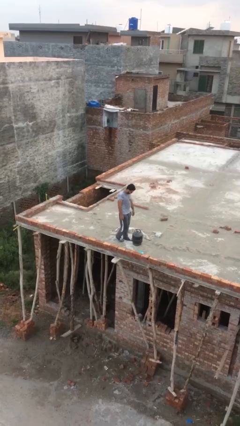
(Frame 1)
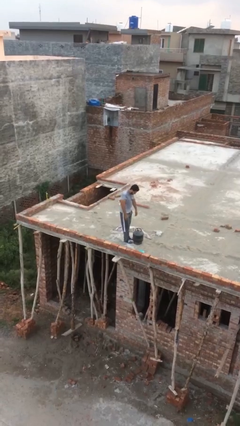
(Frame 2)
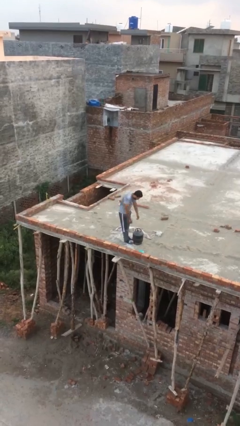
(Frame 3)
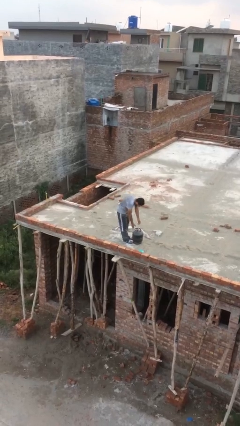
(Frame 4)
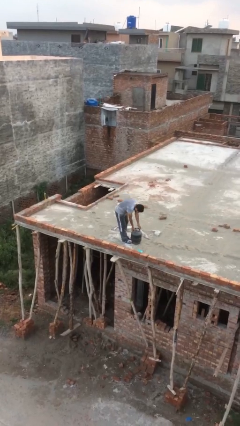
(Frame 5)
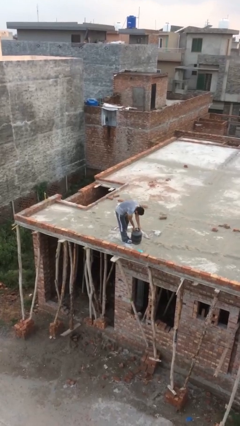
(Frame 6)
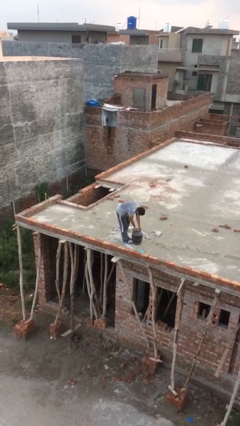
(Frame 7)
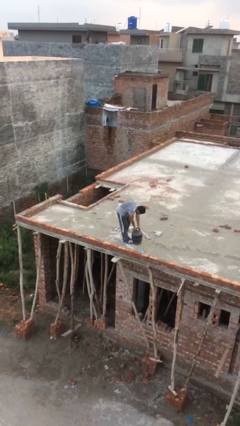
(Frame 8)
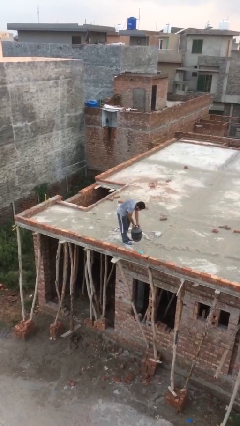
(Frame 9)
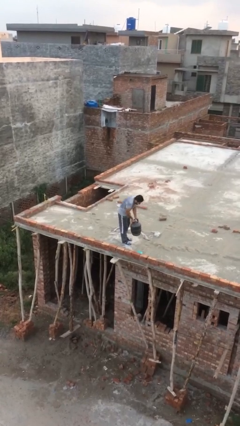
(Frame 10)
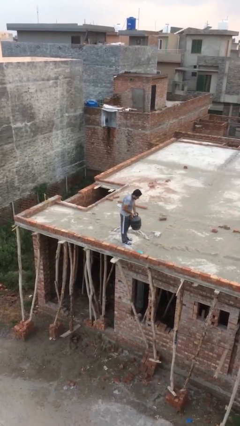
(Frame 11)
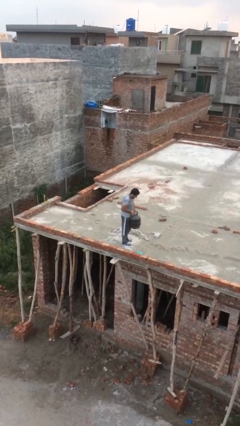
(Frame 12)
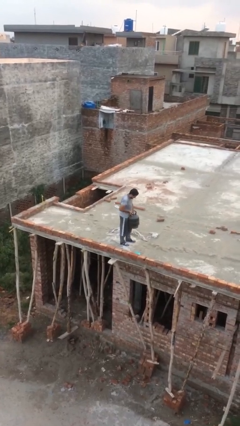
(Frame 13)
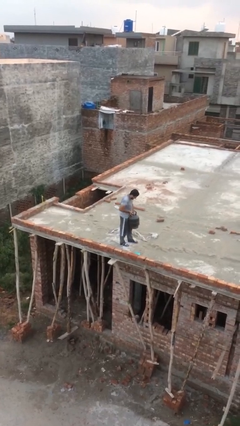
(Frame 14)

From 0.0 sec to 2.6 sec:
person picks up object from floor

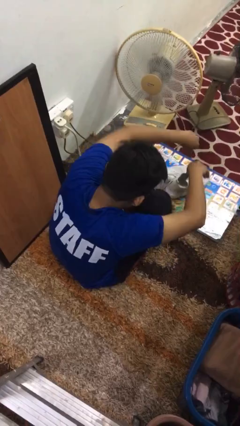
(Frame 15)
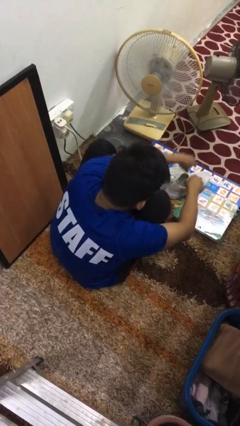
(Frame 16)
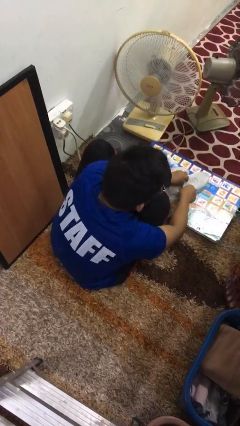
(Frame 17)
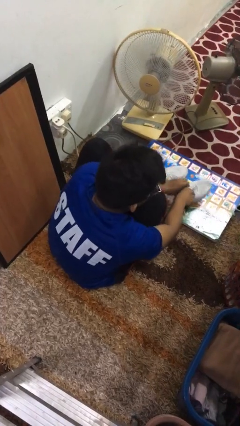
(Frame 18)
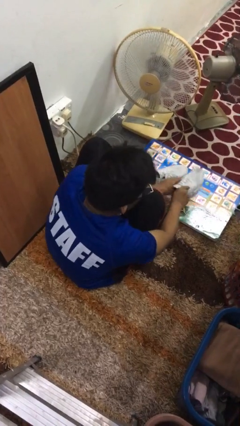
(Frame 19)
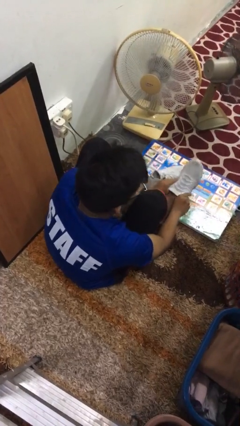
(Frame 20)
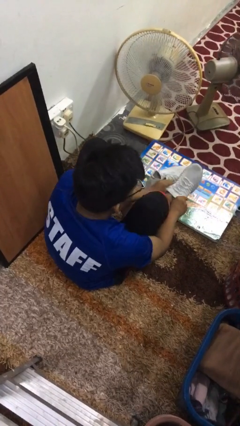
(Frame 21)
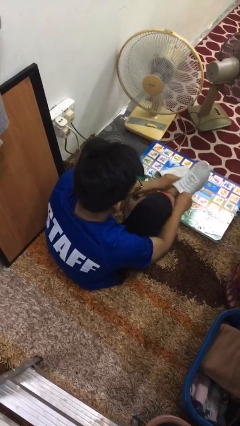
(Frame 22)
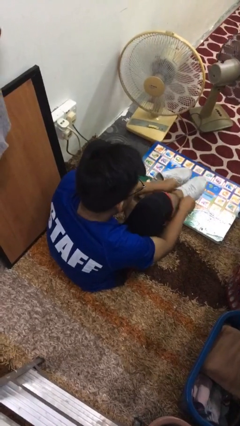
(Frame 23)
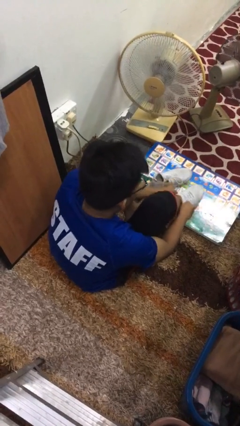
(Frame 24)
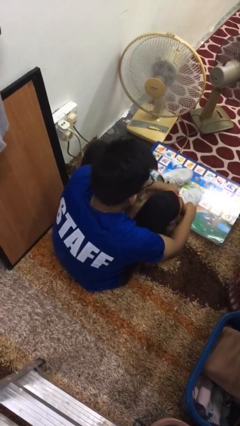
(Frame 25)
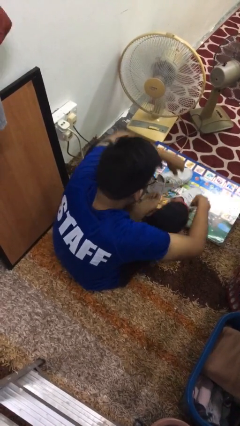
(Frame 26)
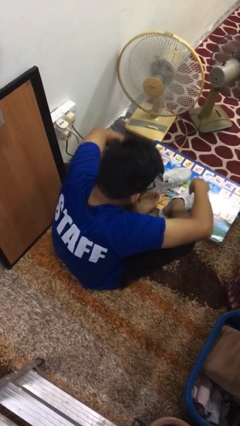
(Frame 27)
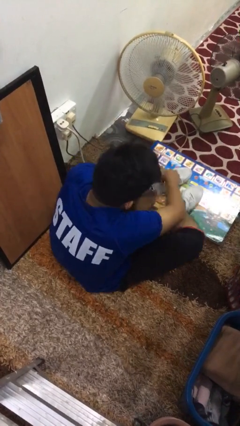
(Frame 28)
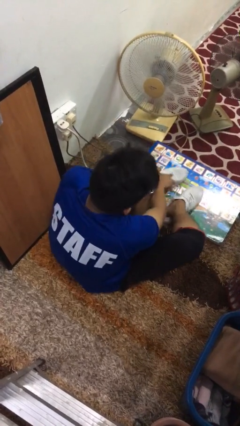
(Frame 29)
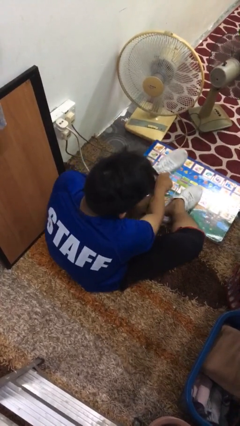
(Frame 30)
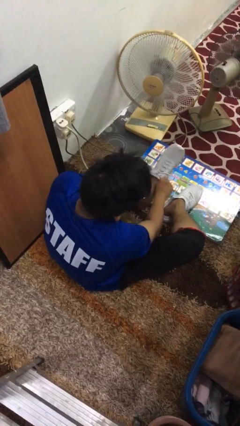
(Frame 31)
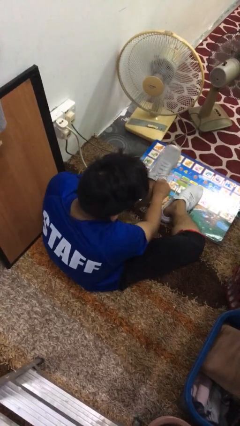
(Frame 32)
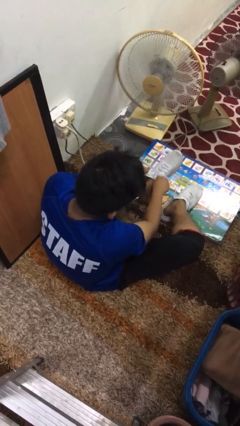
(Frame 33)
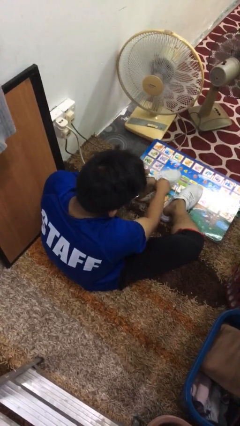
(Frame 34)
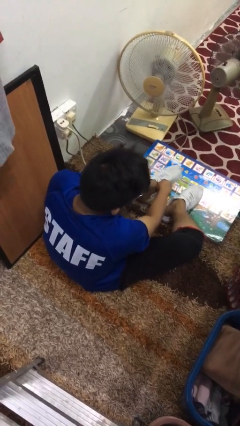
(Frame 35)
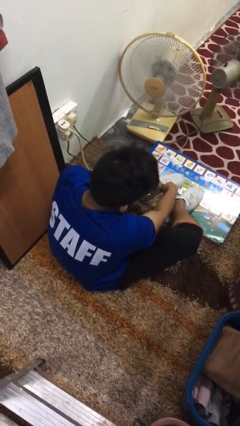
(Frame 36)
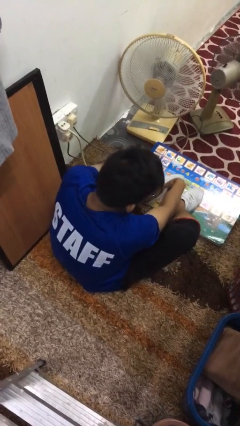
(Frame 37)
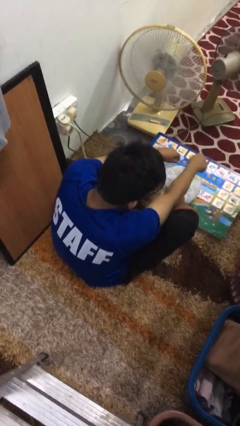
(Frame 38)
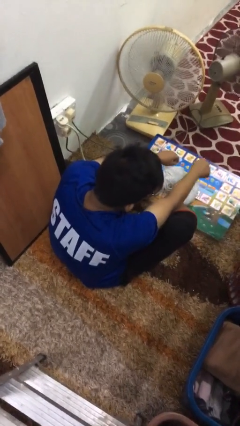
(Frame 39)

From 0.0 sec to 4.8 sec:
person puts on shoes

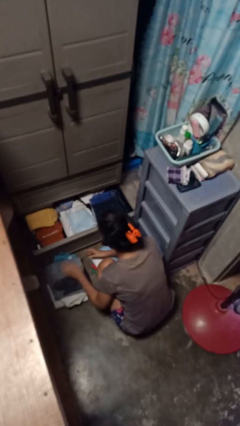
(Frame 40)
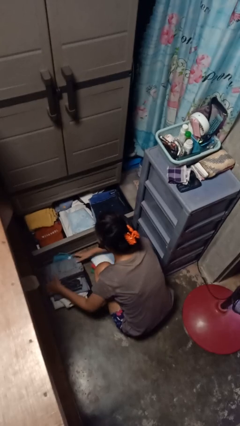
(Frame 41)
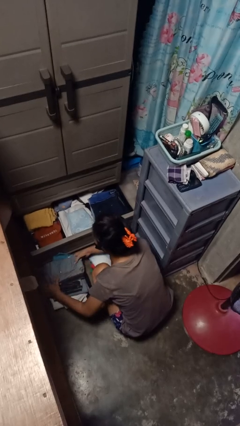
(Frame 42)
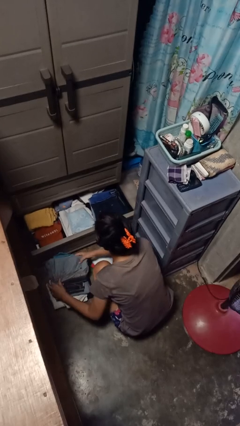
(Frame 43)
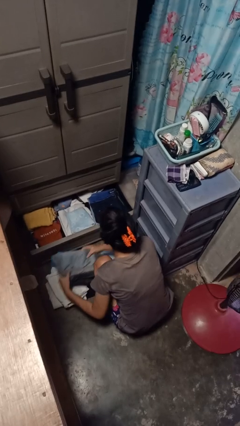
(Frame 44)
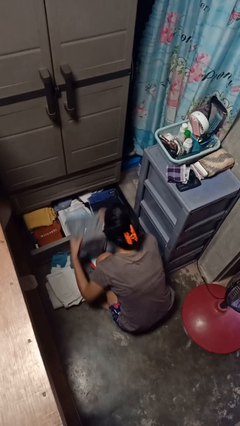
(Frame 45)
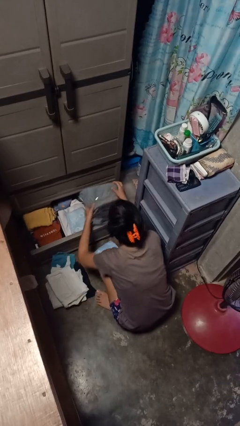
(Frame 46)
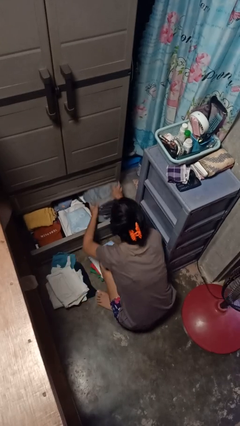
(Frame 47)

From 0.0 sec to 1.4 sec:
person puts clothes into dresser

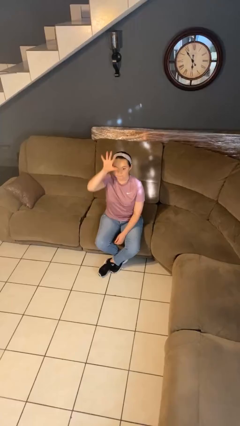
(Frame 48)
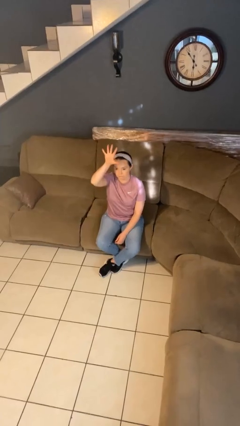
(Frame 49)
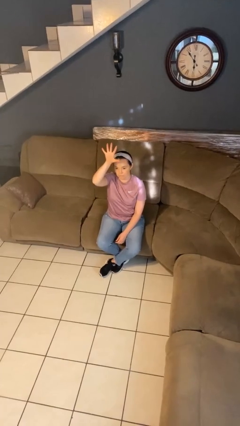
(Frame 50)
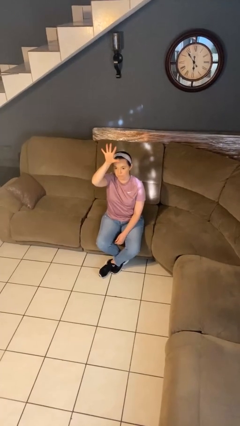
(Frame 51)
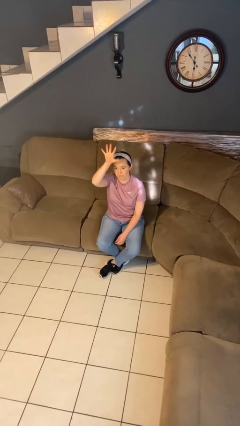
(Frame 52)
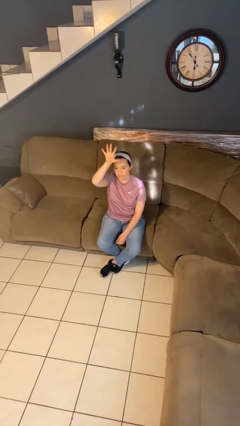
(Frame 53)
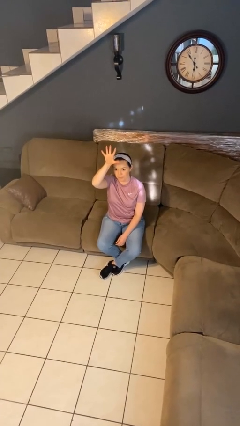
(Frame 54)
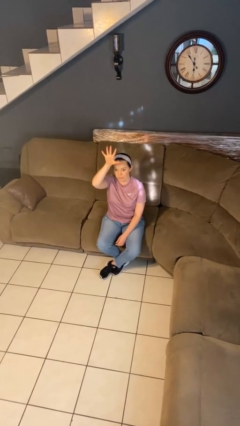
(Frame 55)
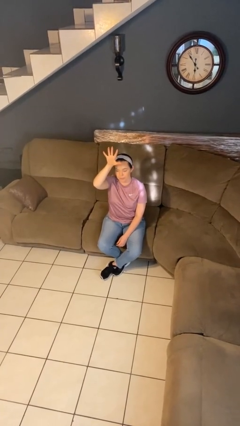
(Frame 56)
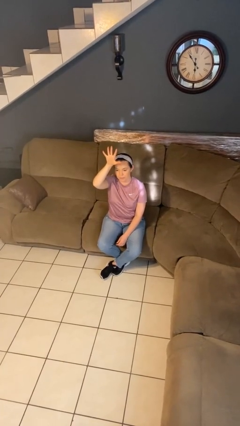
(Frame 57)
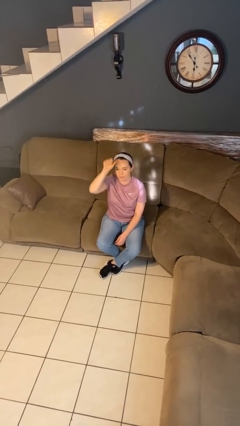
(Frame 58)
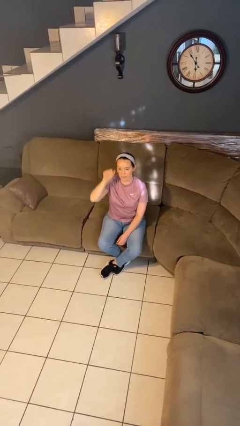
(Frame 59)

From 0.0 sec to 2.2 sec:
person gestures number five

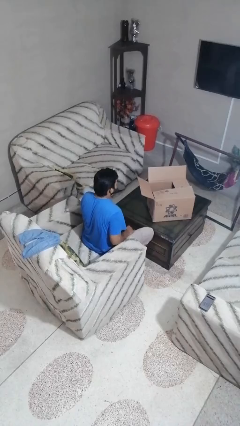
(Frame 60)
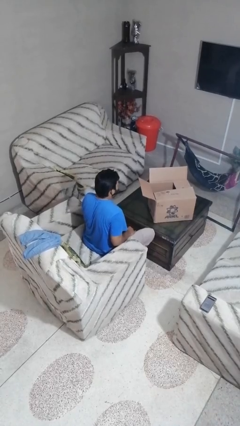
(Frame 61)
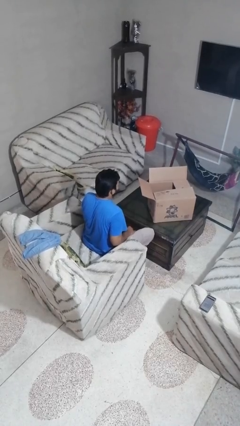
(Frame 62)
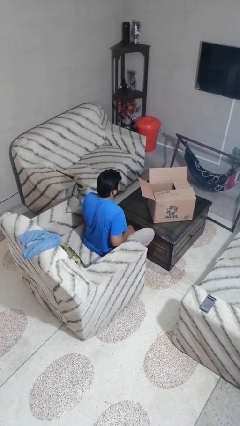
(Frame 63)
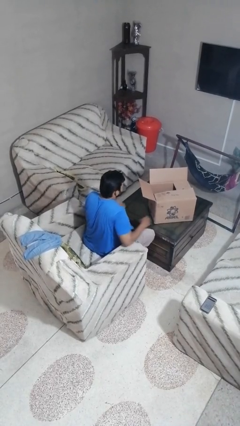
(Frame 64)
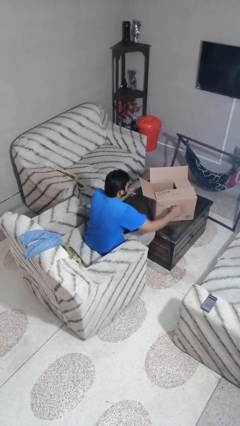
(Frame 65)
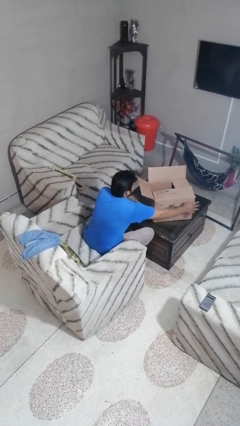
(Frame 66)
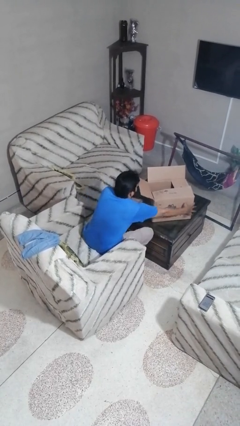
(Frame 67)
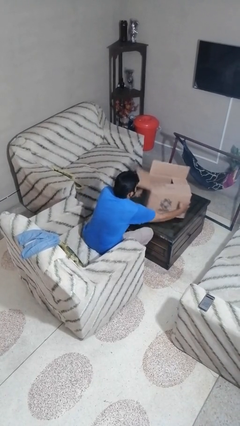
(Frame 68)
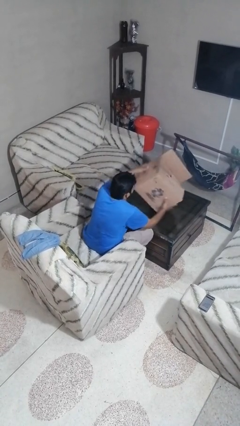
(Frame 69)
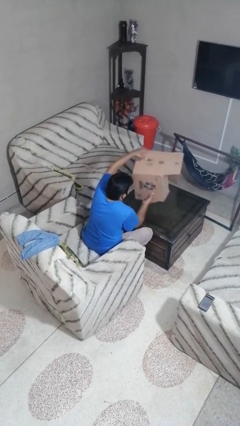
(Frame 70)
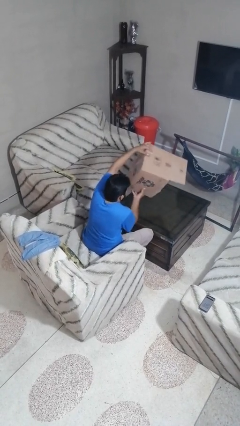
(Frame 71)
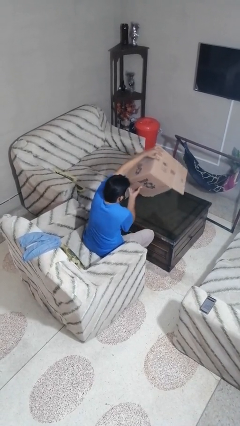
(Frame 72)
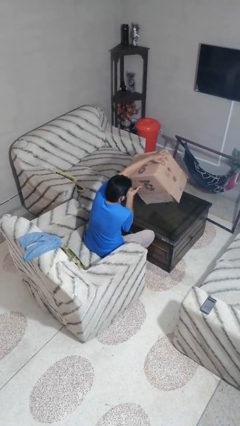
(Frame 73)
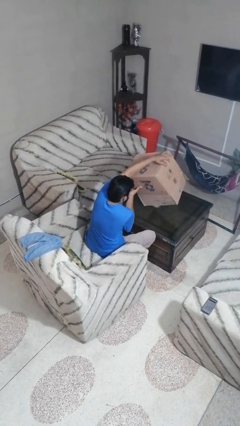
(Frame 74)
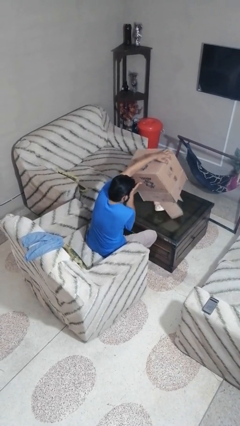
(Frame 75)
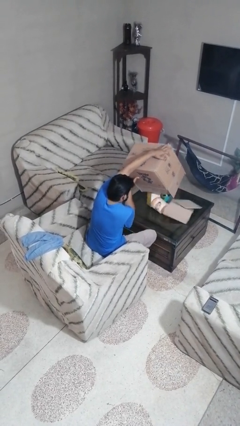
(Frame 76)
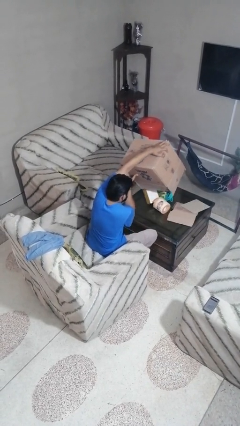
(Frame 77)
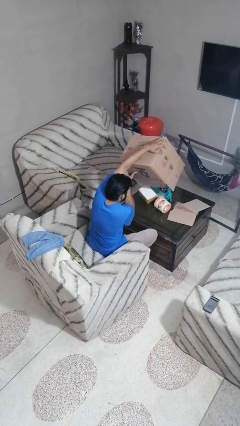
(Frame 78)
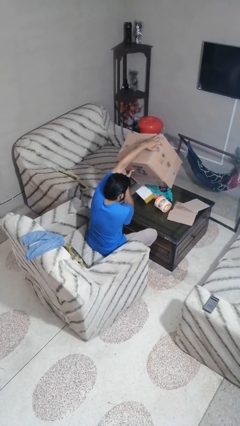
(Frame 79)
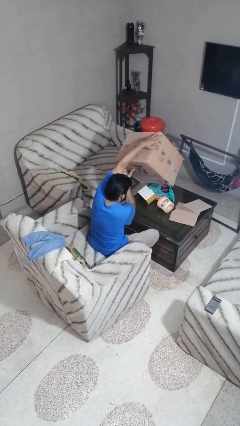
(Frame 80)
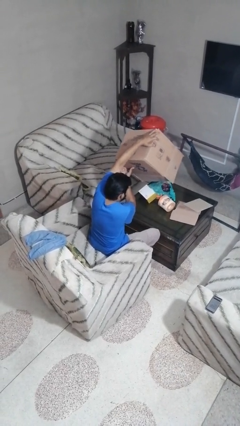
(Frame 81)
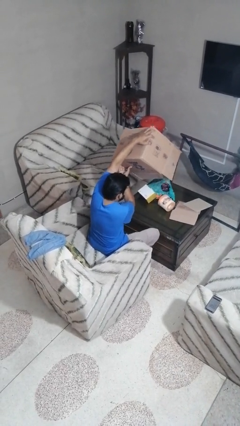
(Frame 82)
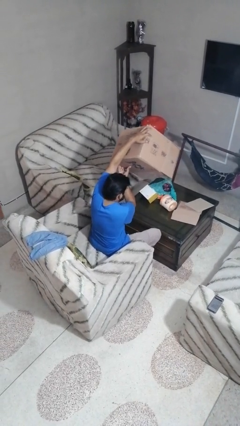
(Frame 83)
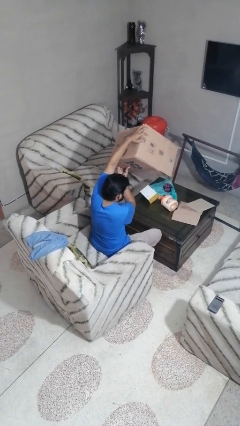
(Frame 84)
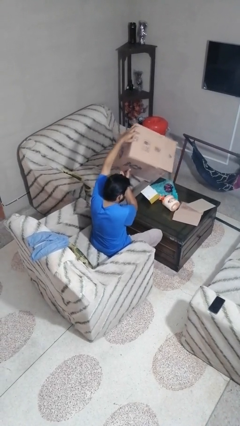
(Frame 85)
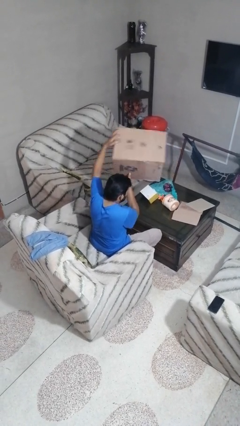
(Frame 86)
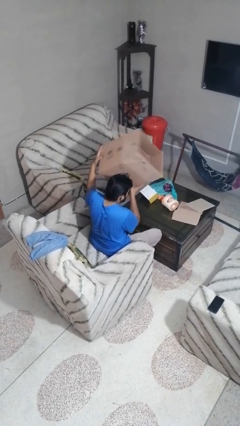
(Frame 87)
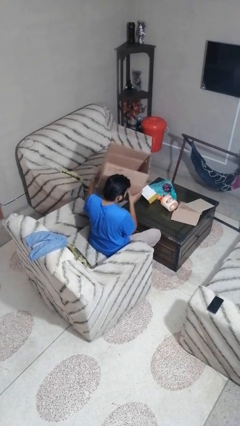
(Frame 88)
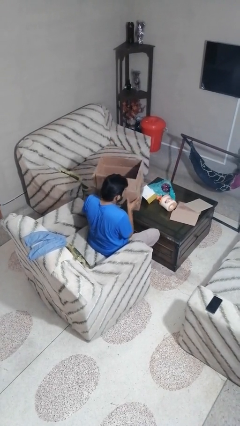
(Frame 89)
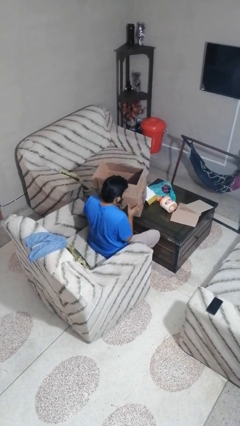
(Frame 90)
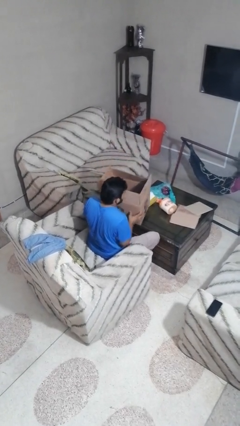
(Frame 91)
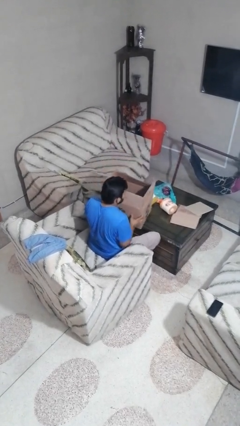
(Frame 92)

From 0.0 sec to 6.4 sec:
person unloads box onto table
